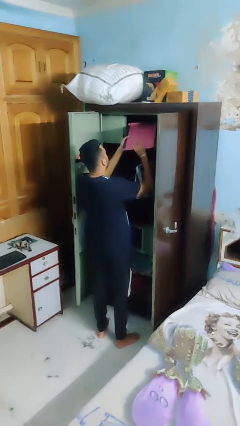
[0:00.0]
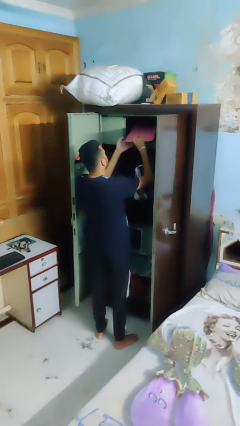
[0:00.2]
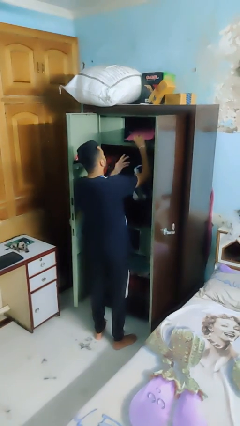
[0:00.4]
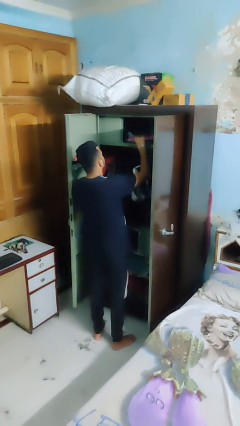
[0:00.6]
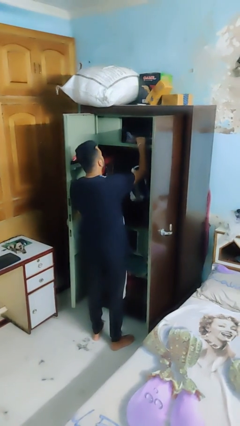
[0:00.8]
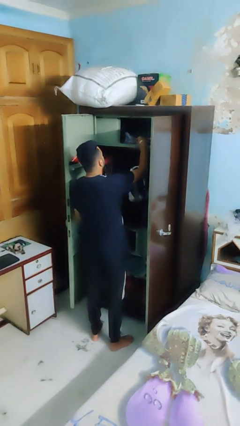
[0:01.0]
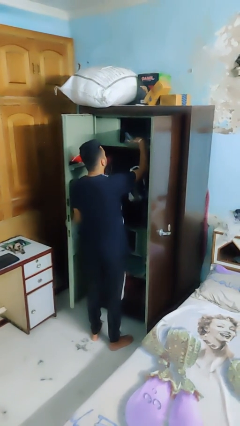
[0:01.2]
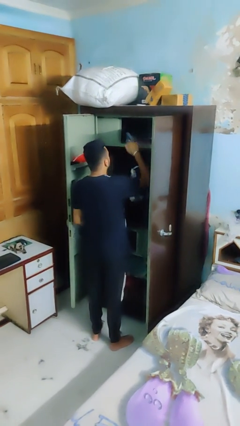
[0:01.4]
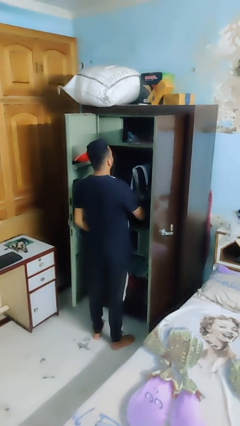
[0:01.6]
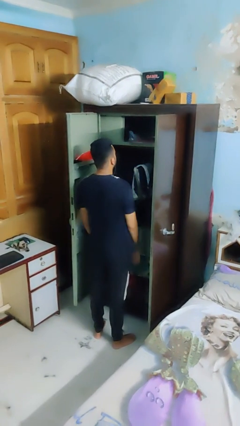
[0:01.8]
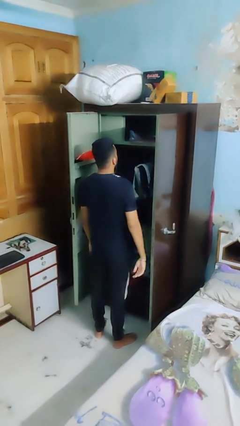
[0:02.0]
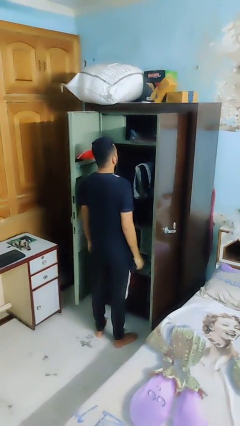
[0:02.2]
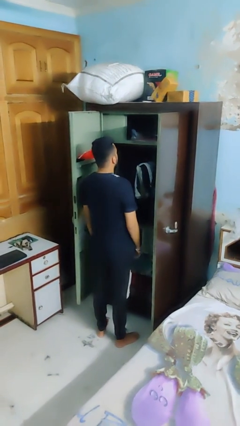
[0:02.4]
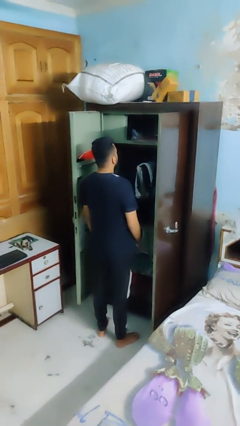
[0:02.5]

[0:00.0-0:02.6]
person puts down object on shelf

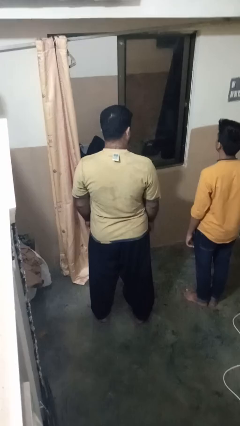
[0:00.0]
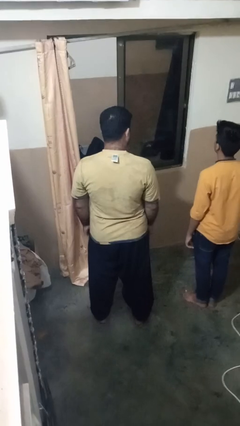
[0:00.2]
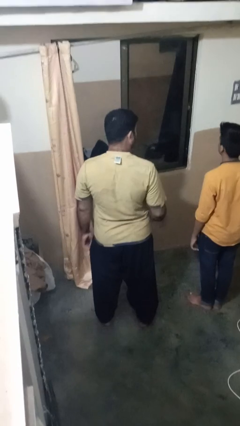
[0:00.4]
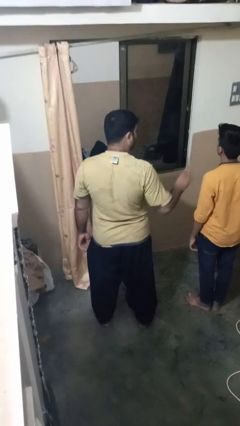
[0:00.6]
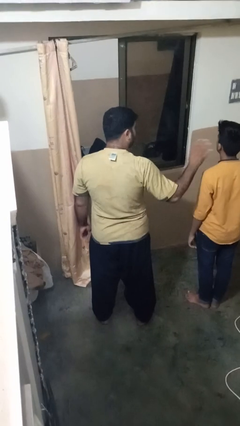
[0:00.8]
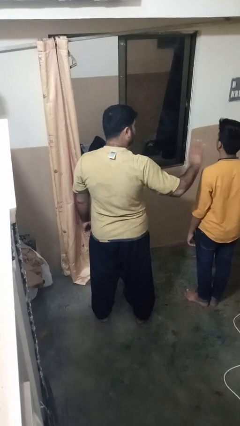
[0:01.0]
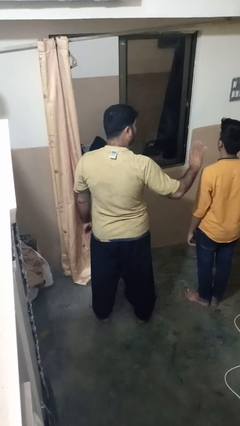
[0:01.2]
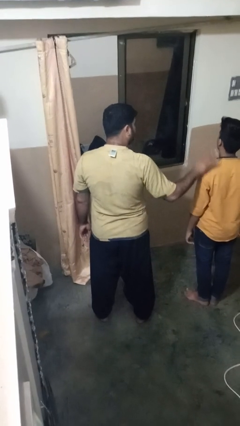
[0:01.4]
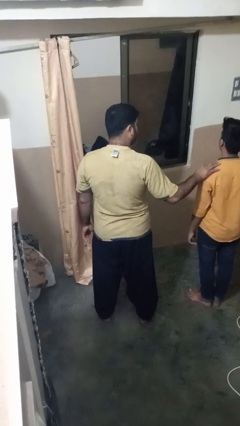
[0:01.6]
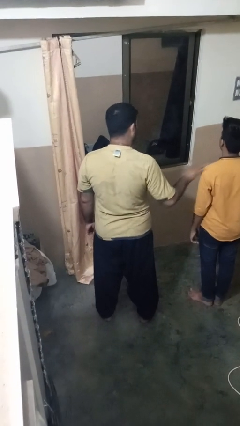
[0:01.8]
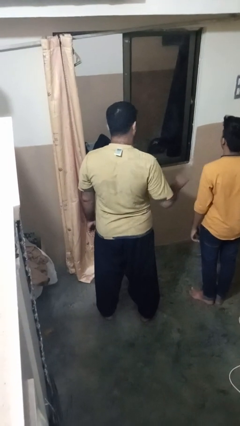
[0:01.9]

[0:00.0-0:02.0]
person waves at person

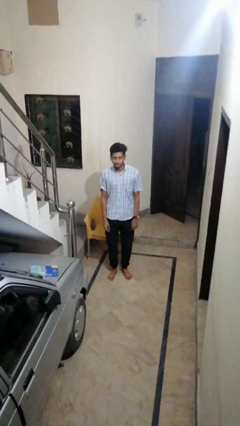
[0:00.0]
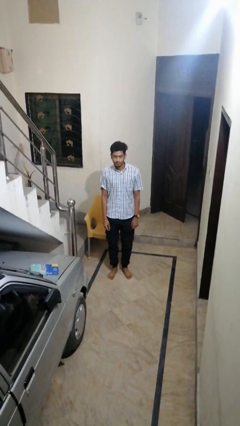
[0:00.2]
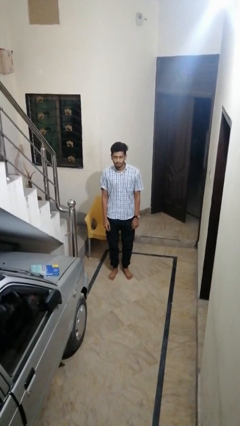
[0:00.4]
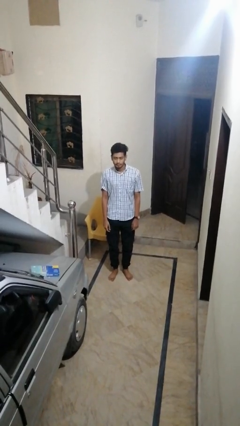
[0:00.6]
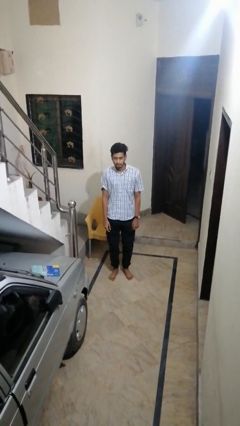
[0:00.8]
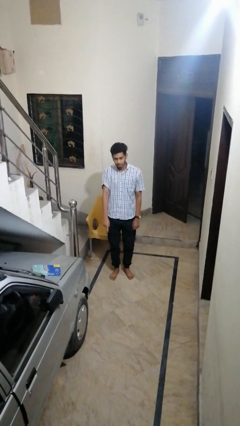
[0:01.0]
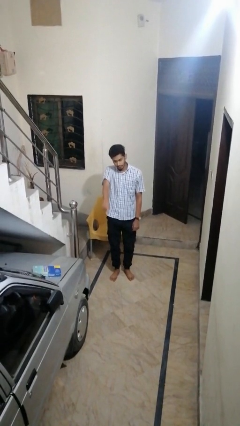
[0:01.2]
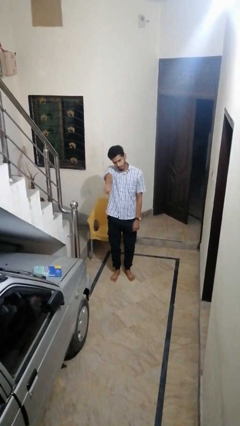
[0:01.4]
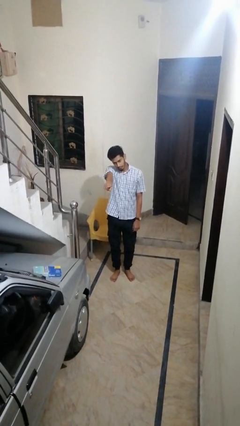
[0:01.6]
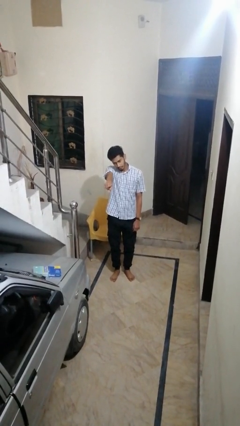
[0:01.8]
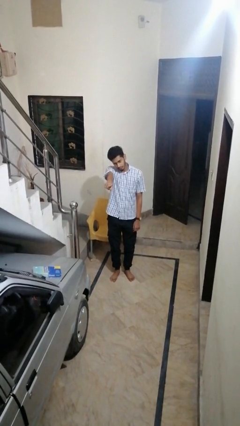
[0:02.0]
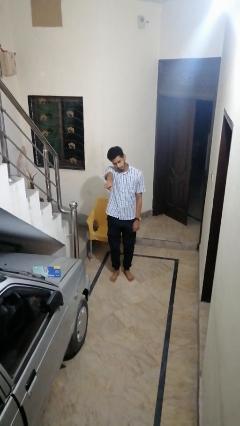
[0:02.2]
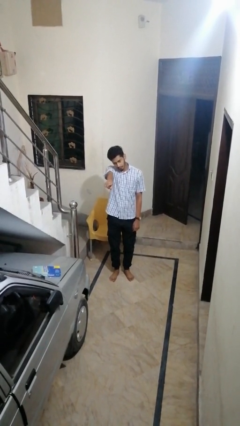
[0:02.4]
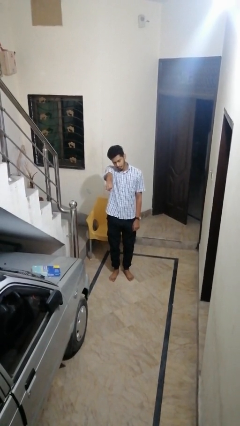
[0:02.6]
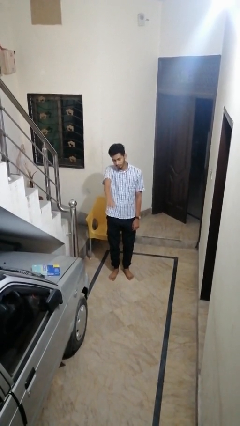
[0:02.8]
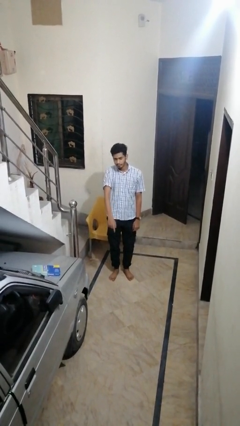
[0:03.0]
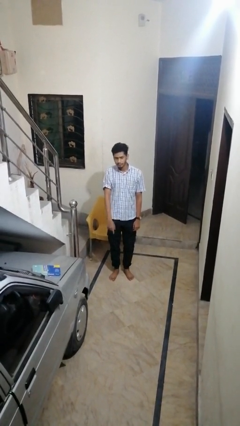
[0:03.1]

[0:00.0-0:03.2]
person points at person

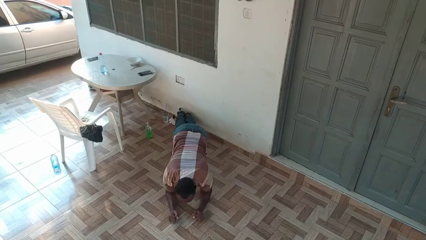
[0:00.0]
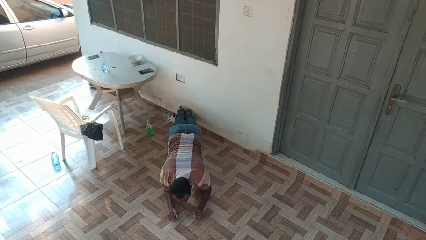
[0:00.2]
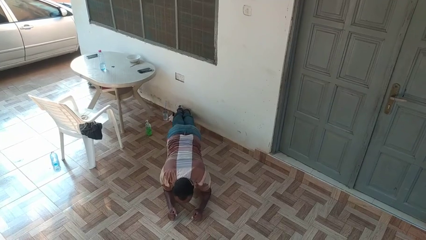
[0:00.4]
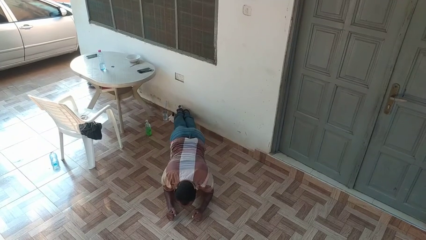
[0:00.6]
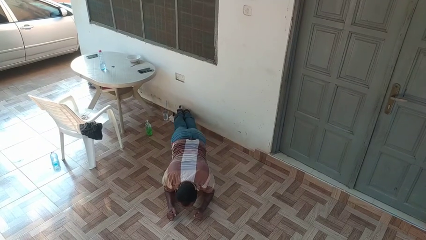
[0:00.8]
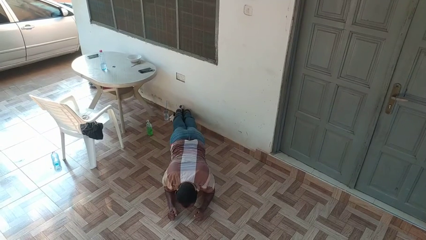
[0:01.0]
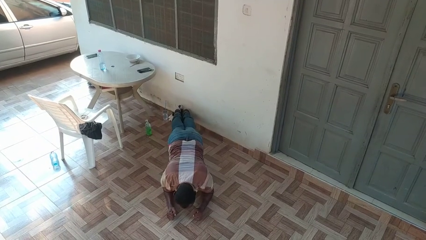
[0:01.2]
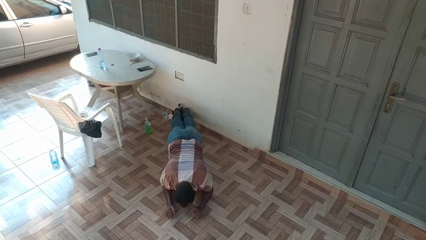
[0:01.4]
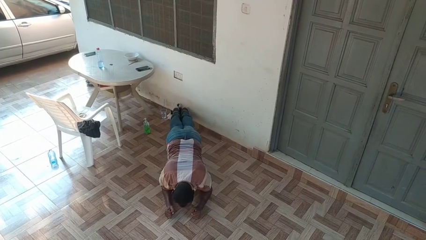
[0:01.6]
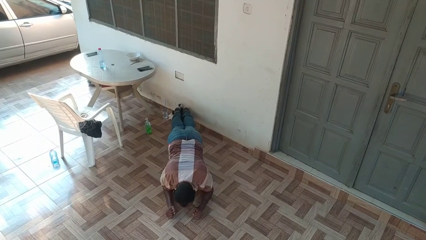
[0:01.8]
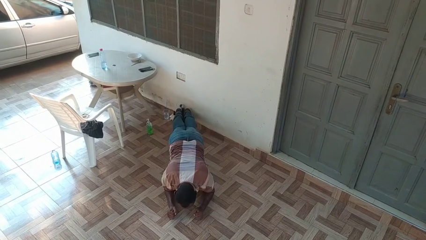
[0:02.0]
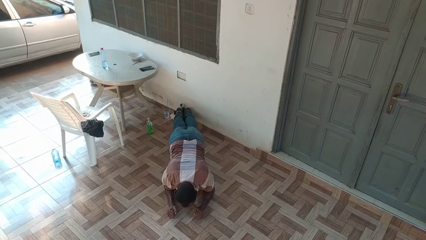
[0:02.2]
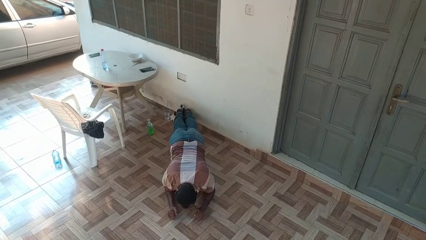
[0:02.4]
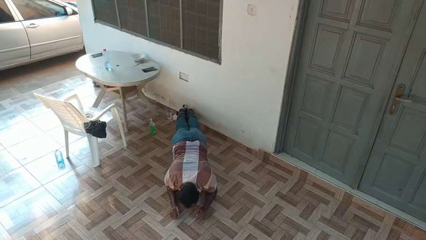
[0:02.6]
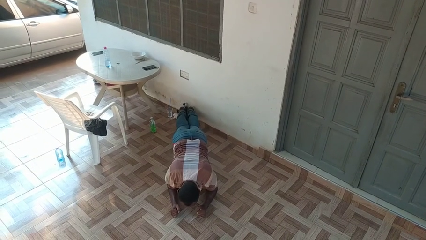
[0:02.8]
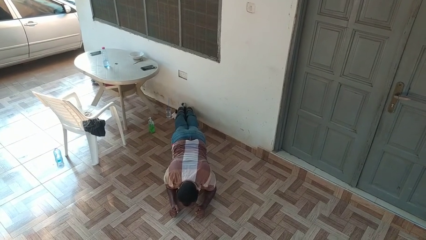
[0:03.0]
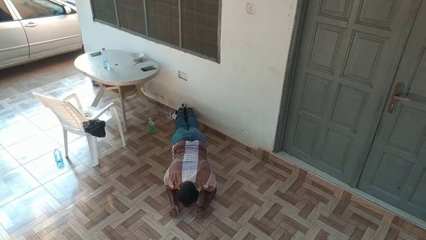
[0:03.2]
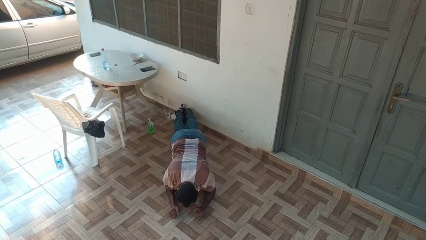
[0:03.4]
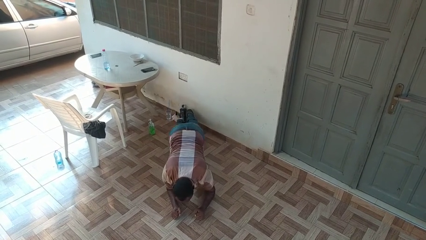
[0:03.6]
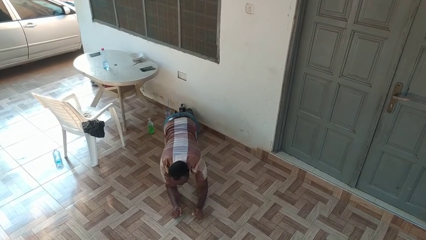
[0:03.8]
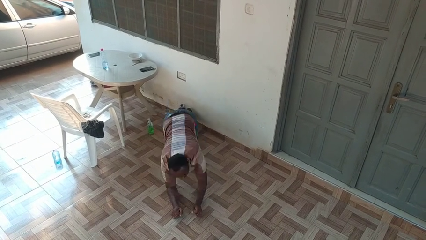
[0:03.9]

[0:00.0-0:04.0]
person exercises with plank

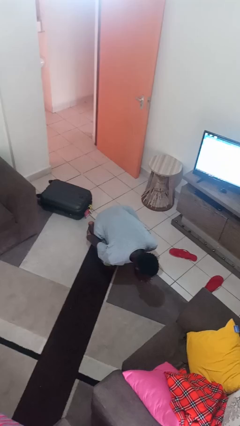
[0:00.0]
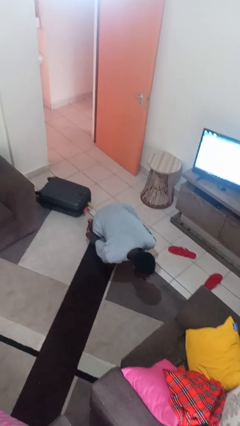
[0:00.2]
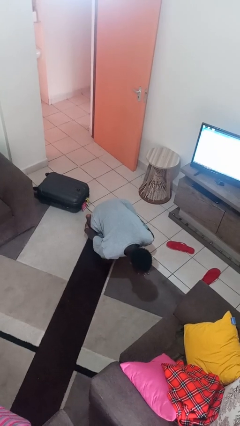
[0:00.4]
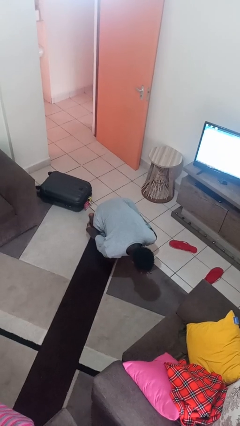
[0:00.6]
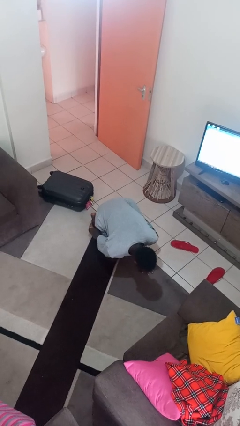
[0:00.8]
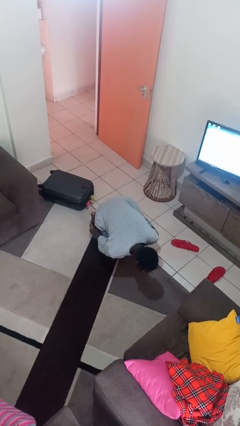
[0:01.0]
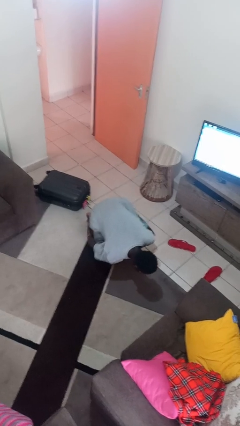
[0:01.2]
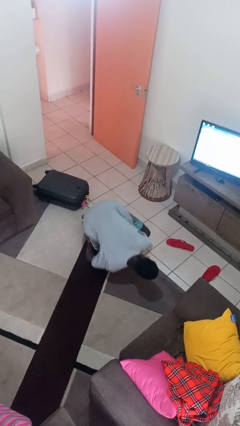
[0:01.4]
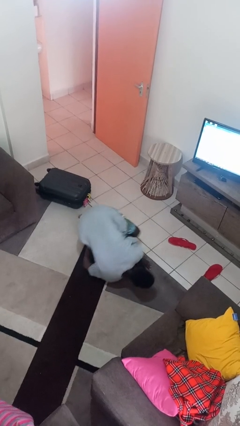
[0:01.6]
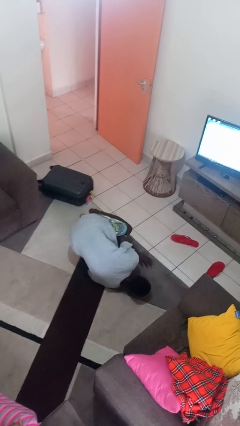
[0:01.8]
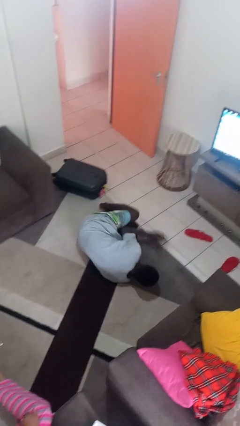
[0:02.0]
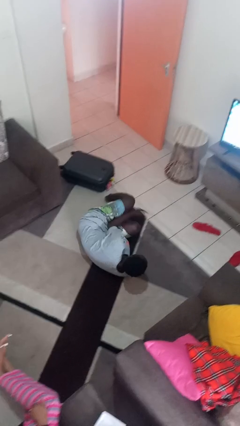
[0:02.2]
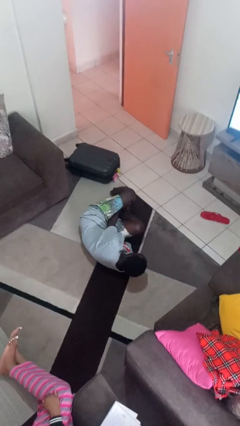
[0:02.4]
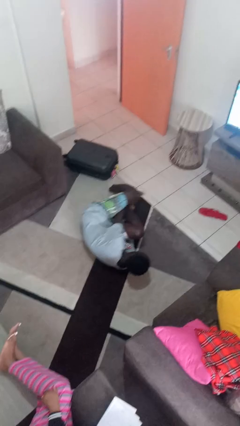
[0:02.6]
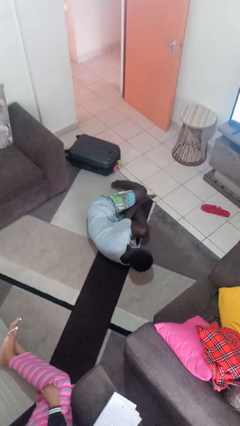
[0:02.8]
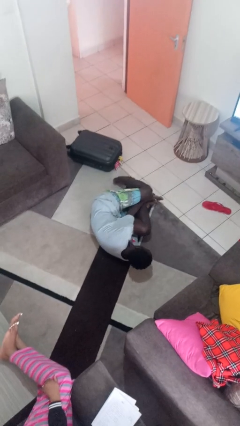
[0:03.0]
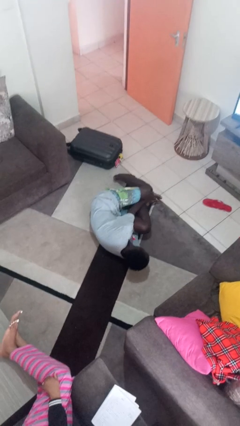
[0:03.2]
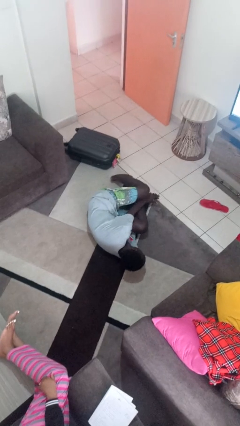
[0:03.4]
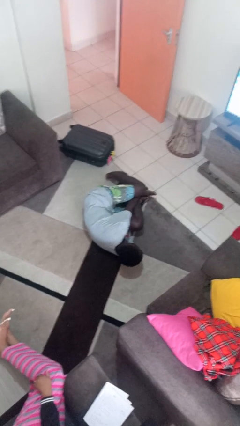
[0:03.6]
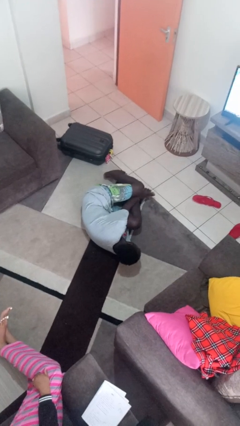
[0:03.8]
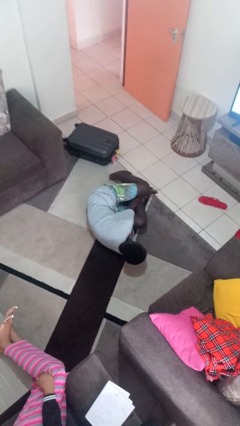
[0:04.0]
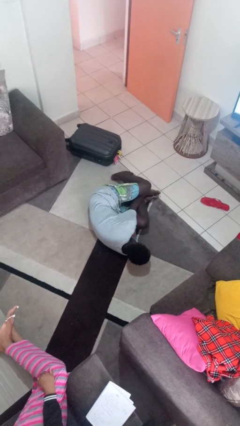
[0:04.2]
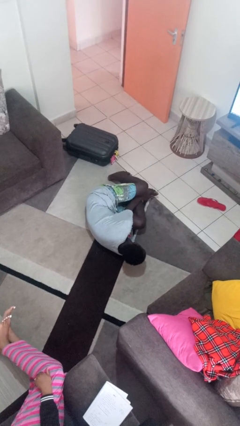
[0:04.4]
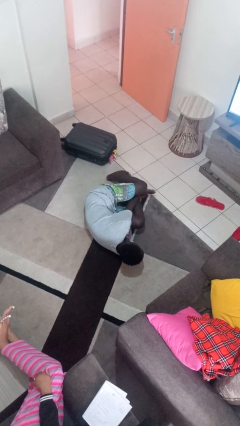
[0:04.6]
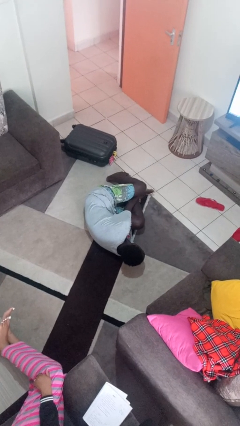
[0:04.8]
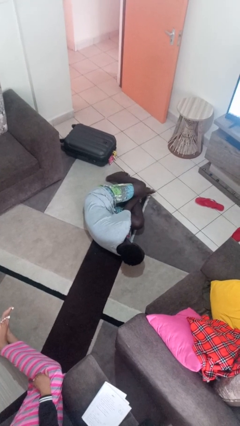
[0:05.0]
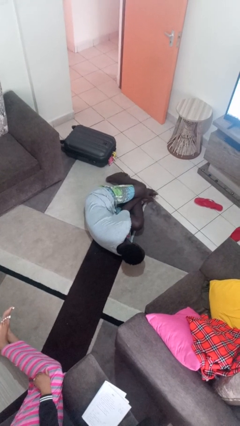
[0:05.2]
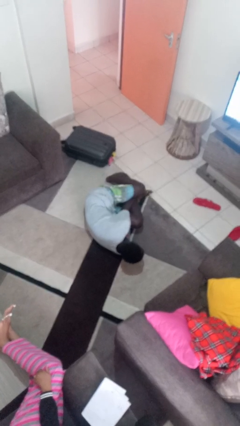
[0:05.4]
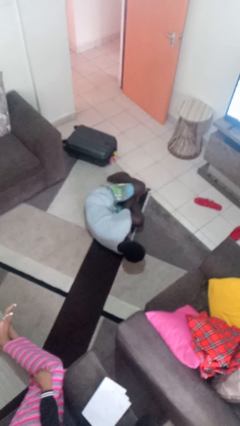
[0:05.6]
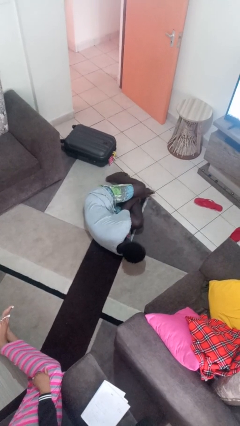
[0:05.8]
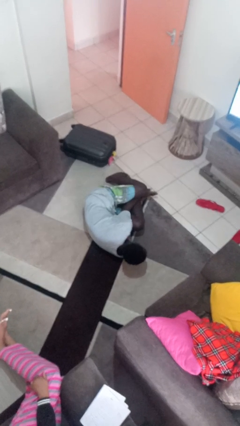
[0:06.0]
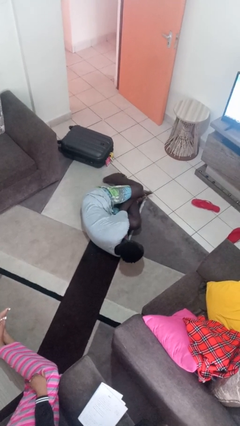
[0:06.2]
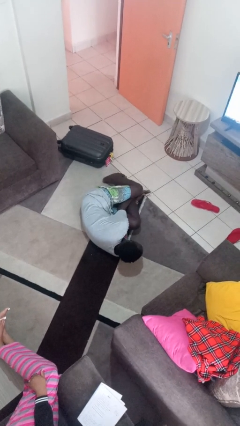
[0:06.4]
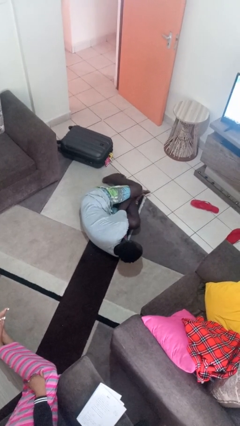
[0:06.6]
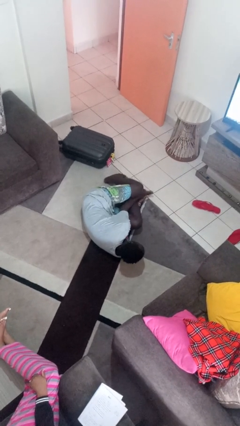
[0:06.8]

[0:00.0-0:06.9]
person lies down on floor
